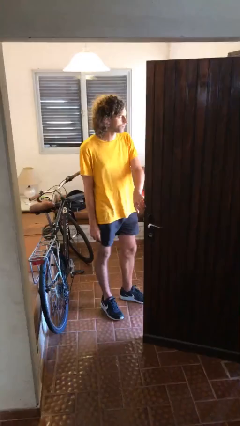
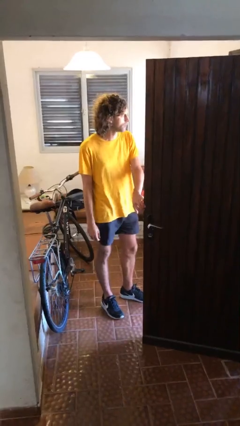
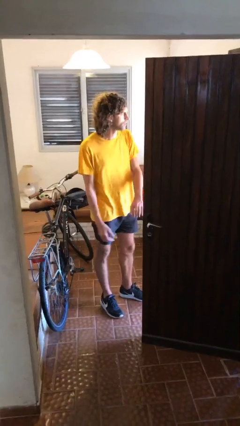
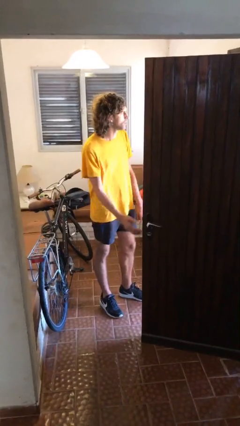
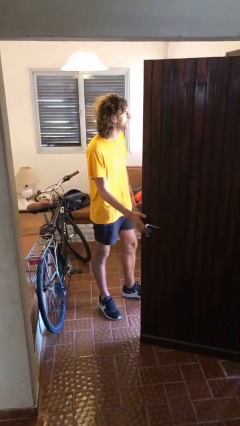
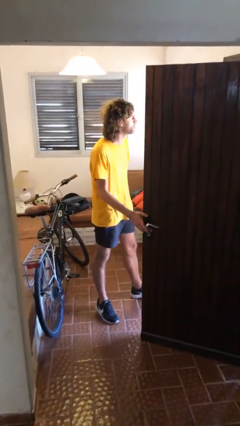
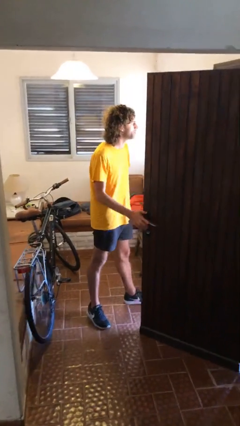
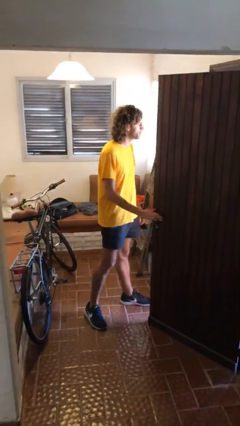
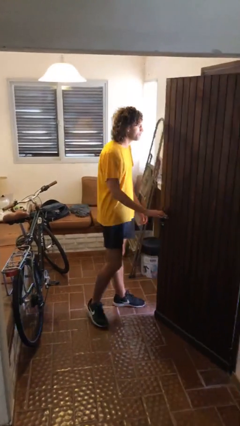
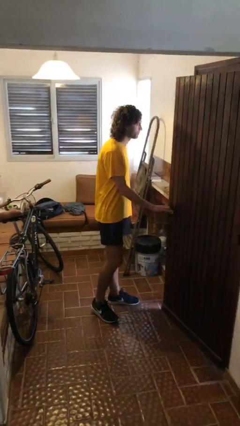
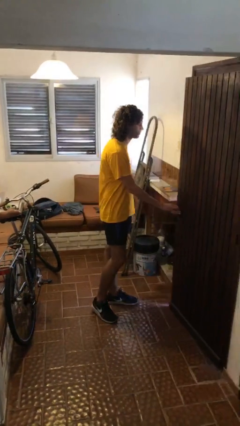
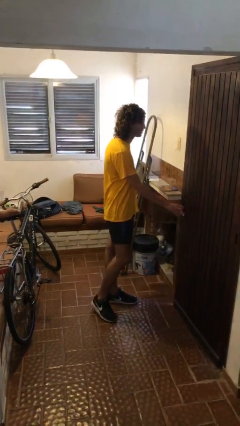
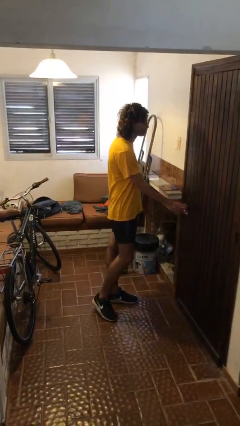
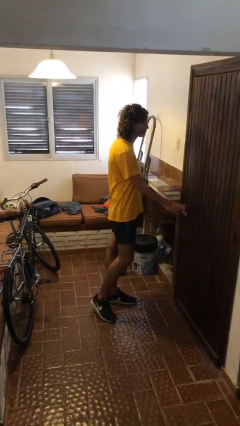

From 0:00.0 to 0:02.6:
person closes facility door

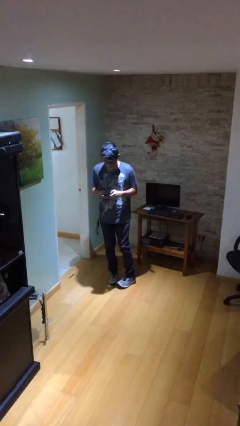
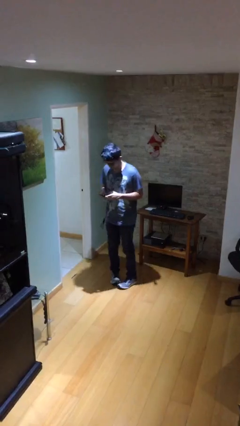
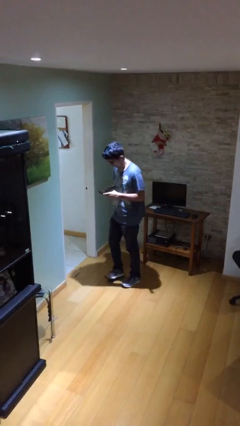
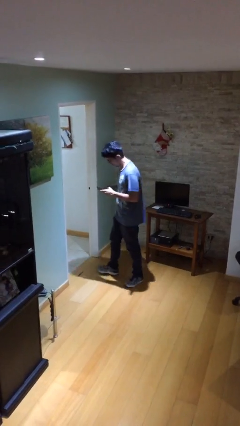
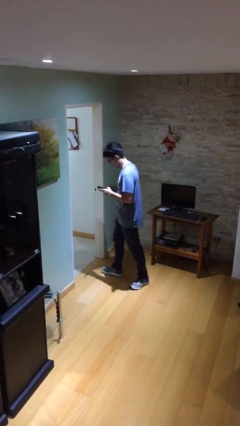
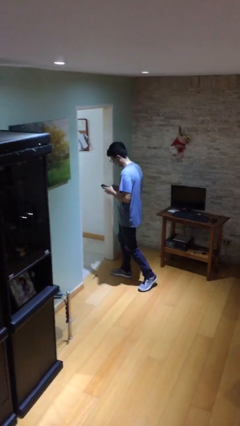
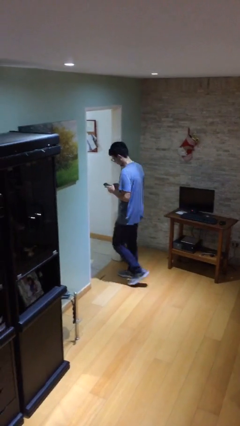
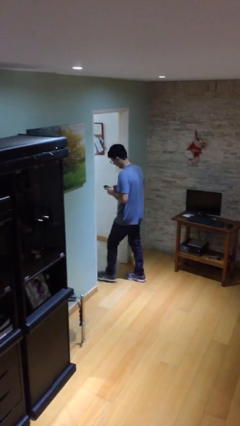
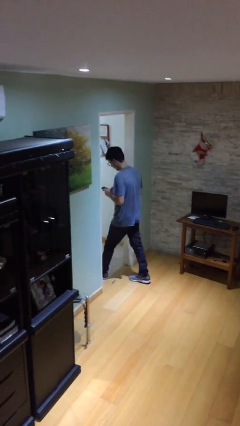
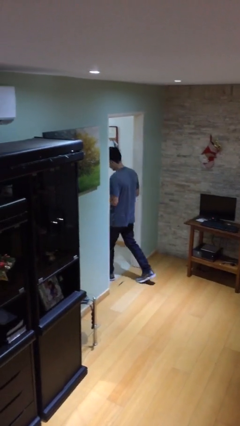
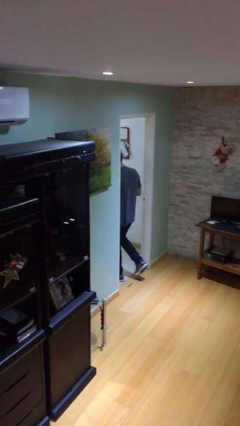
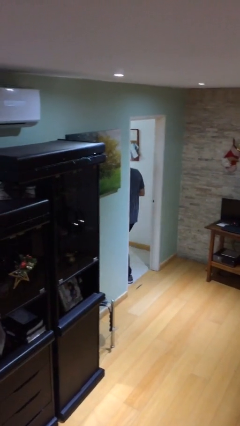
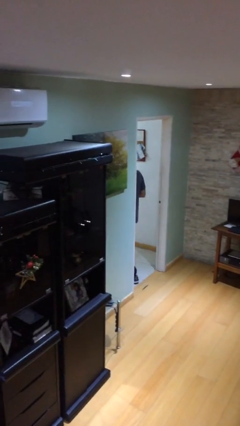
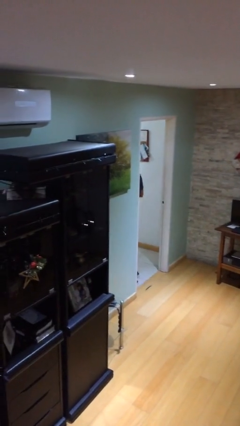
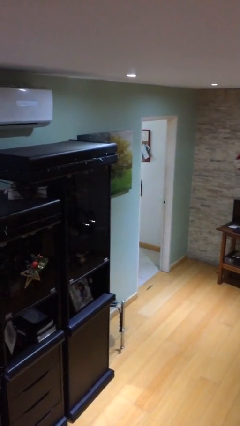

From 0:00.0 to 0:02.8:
person exits scene through structure

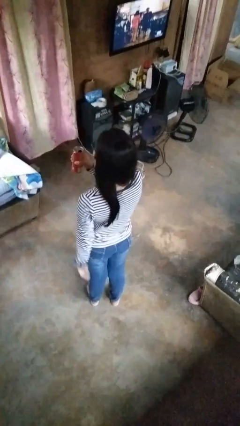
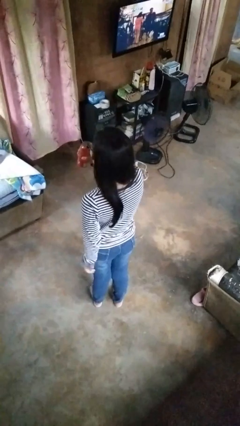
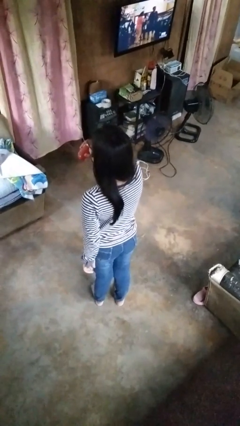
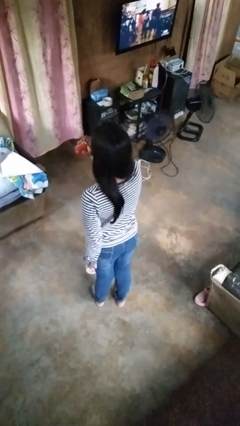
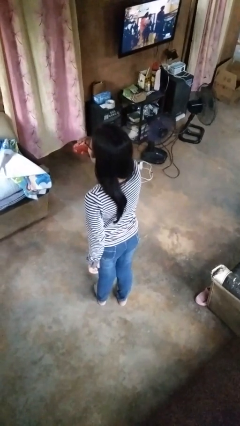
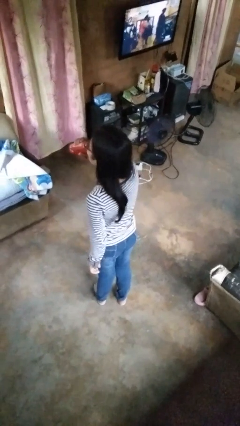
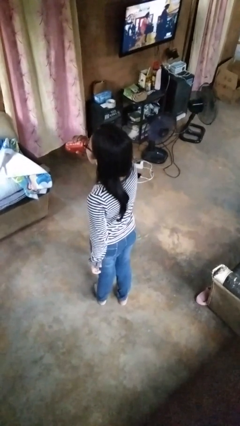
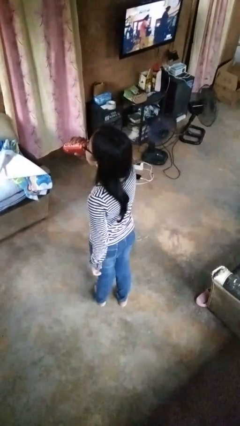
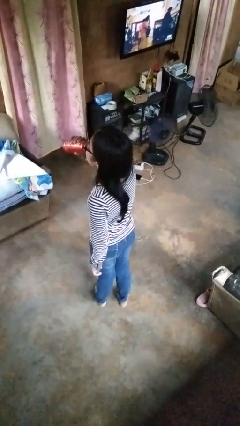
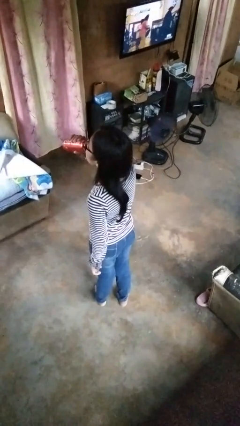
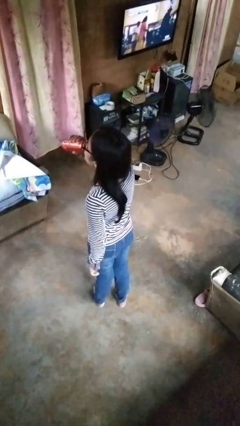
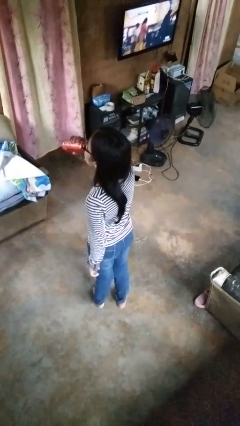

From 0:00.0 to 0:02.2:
person drinks from beverage can

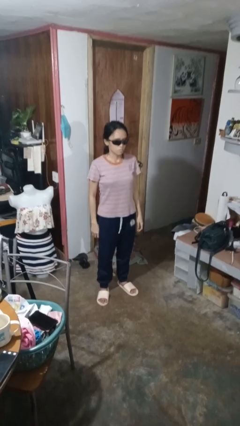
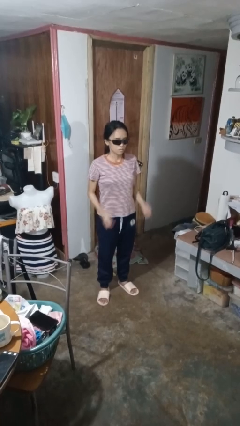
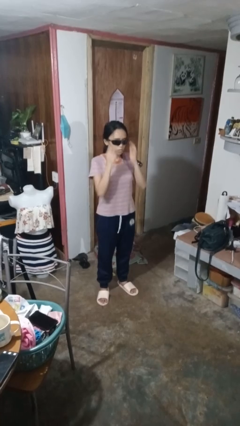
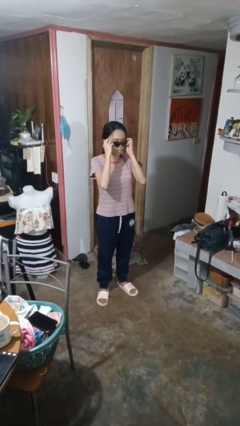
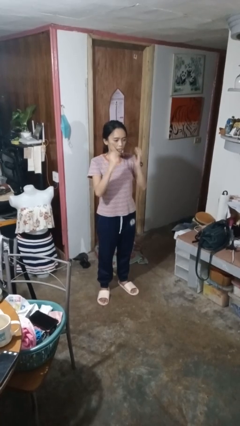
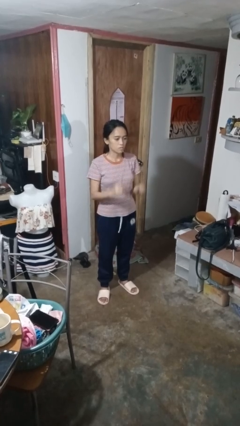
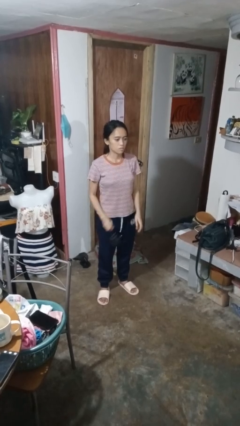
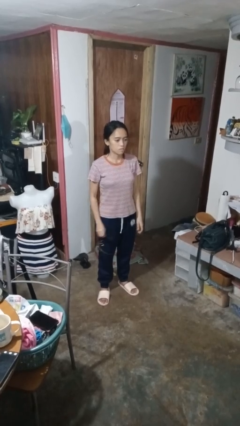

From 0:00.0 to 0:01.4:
person takes off sunglasses

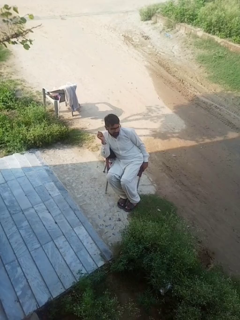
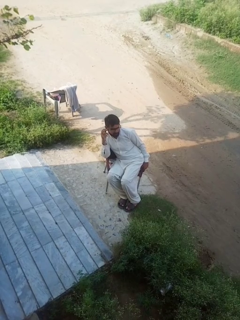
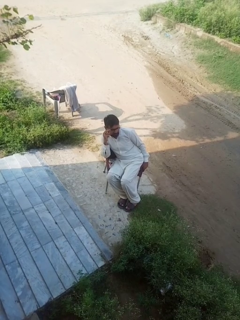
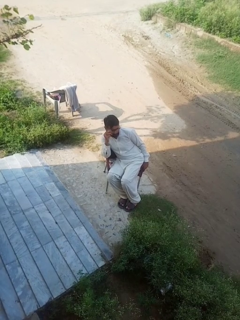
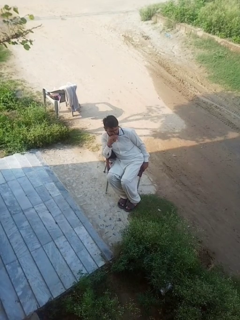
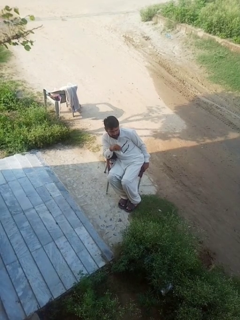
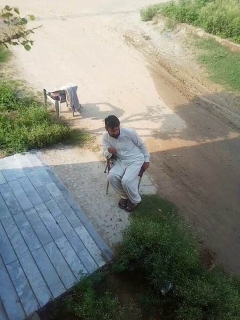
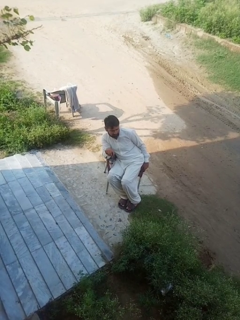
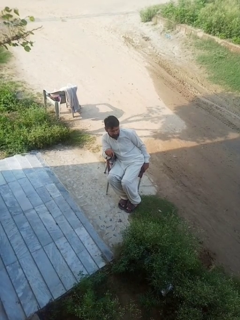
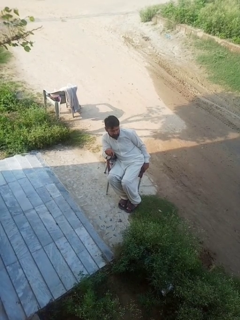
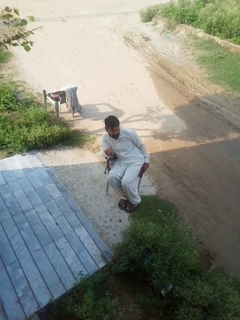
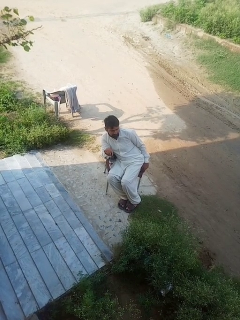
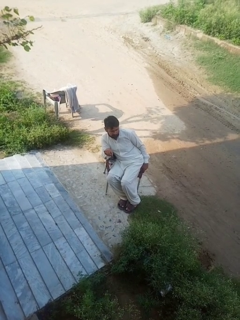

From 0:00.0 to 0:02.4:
person takes off glasses

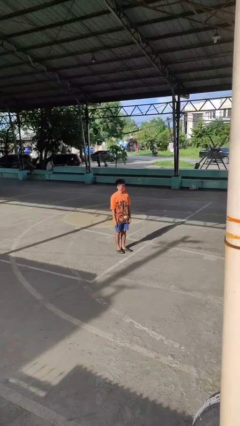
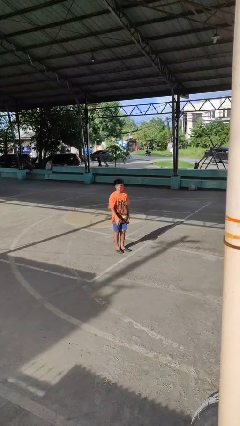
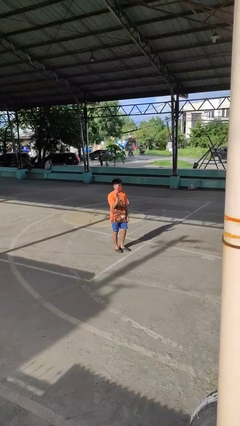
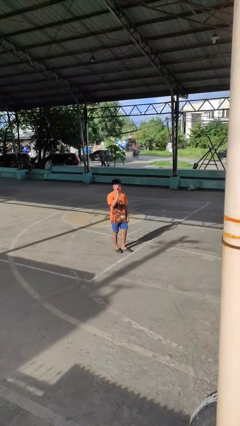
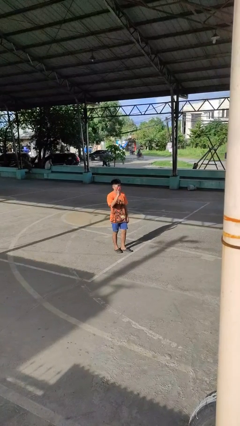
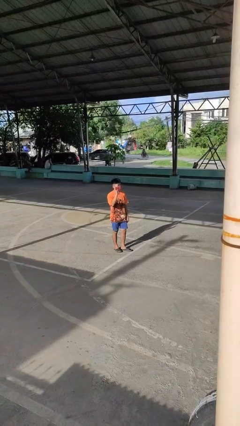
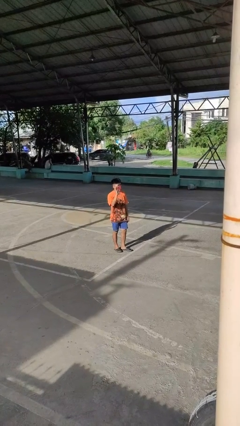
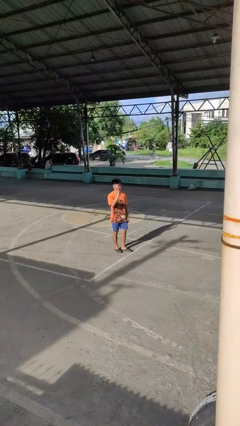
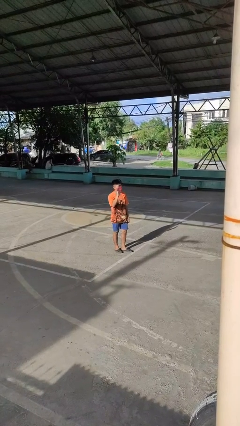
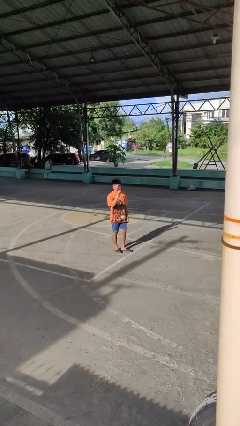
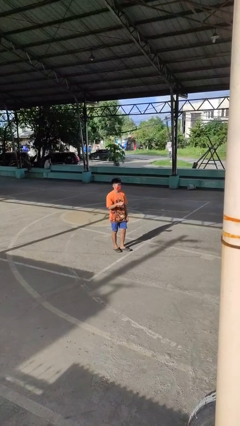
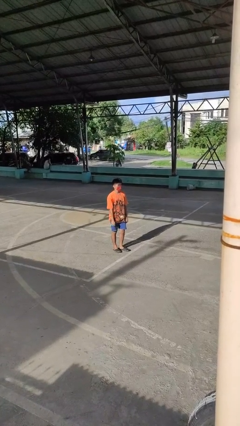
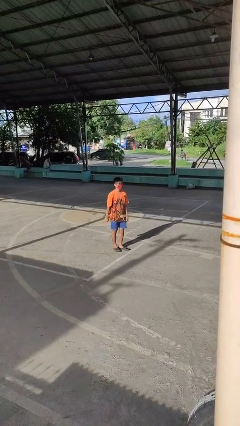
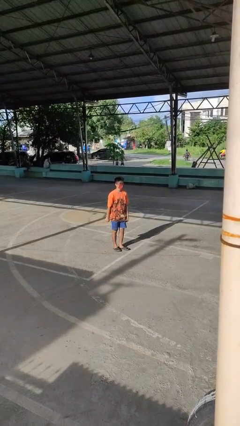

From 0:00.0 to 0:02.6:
person waves at person

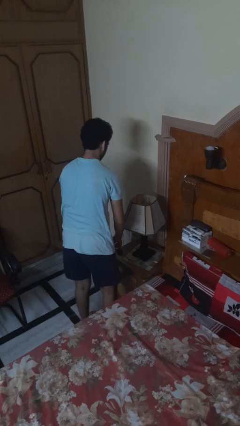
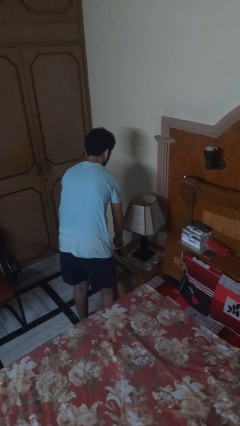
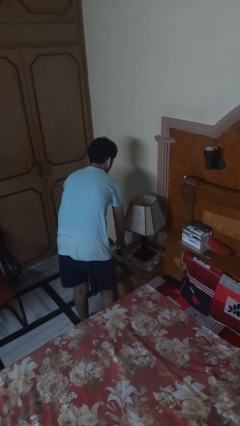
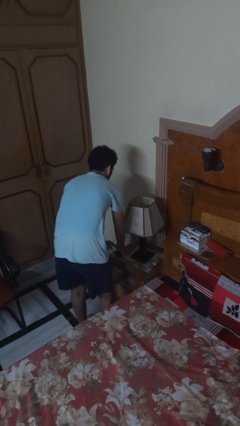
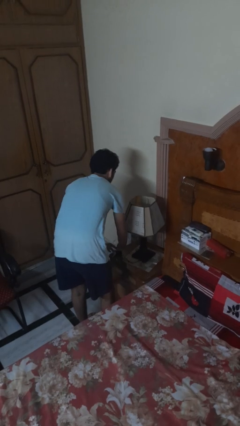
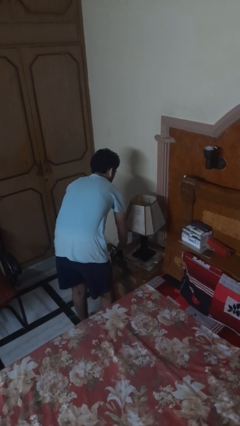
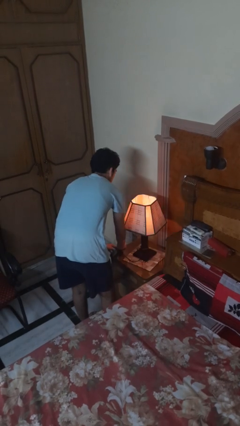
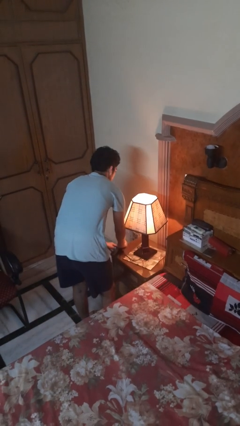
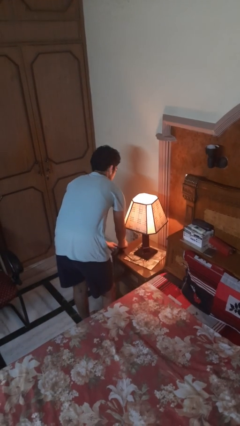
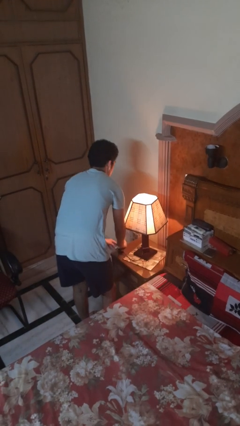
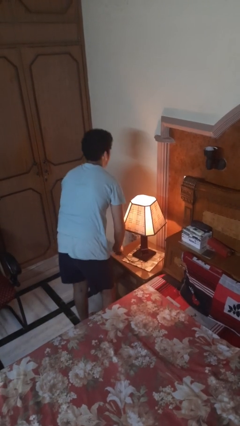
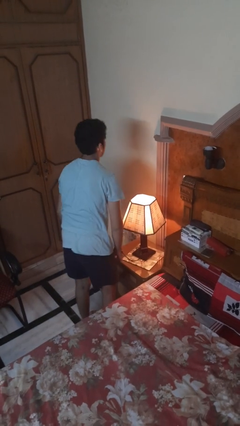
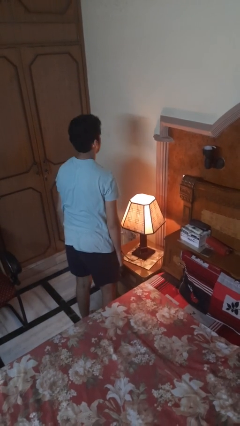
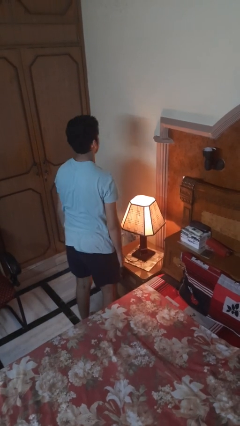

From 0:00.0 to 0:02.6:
person turns on lamp

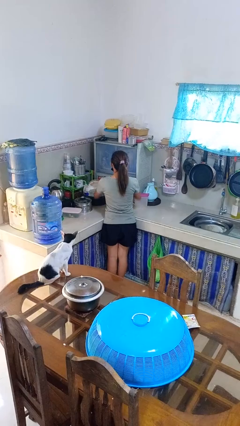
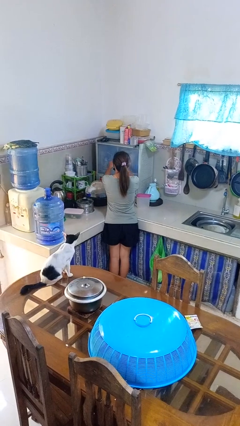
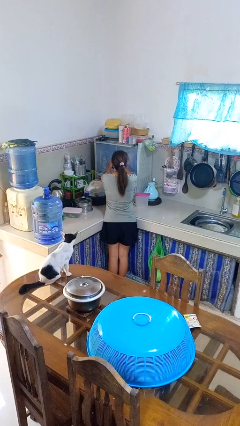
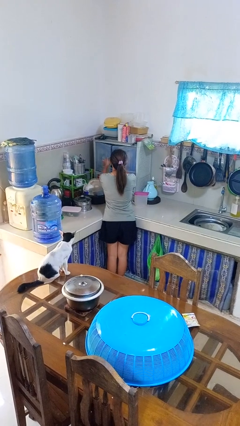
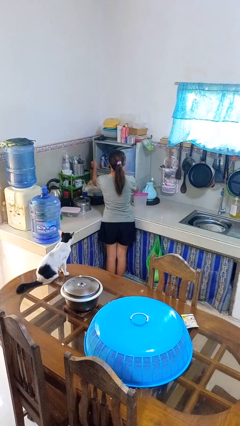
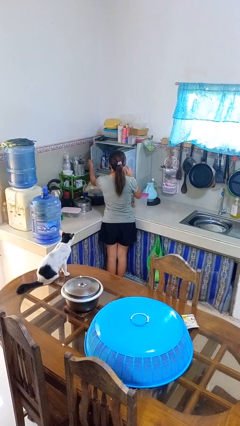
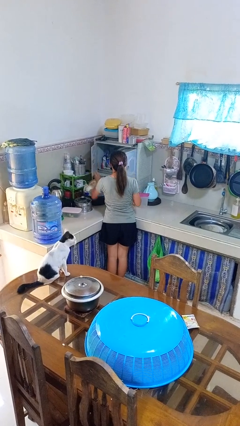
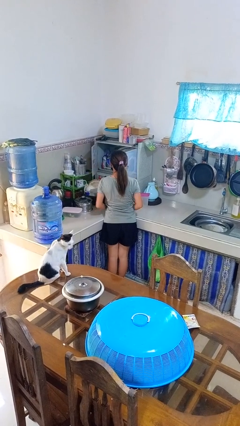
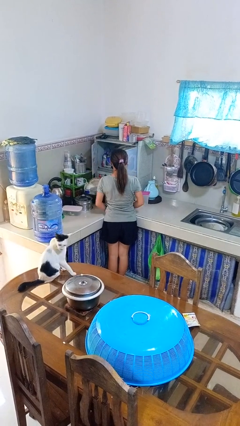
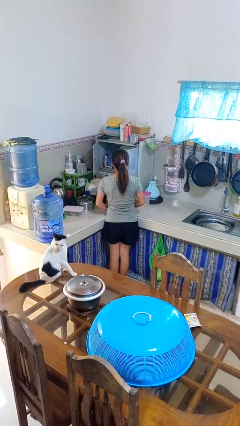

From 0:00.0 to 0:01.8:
person opens kitchen drawer
